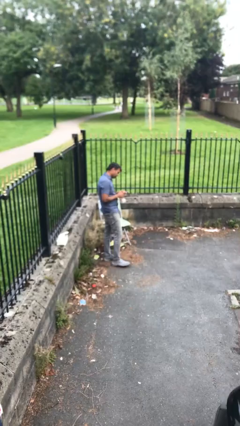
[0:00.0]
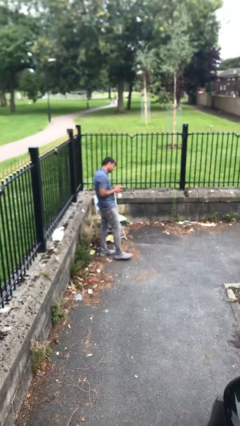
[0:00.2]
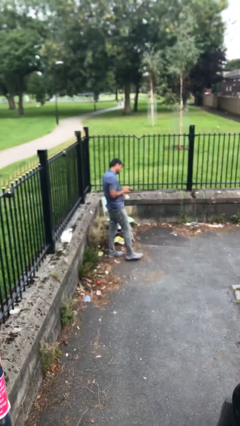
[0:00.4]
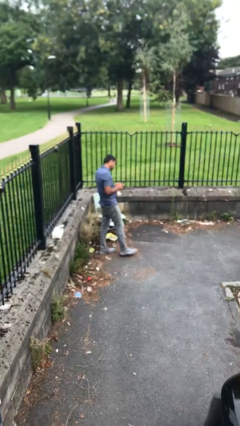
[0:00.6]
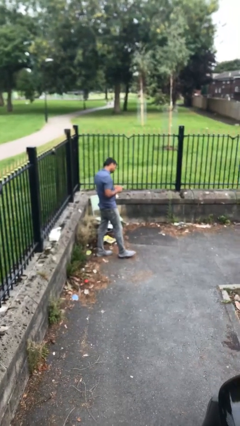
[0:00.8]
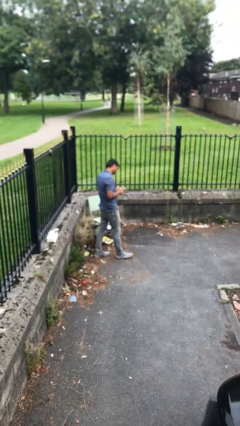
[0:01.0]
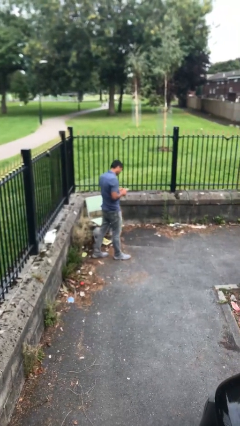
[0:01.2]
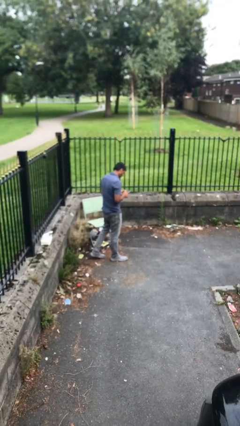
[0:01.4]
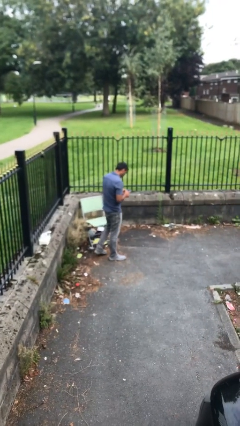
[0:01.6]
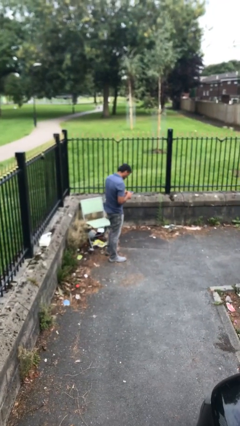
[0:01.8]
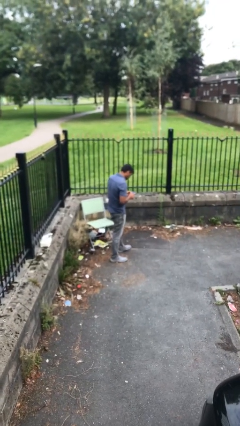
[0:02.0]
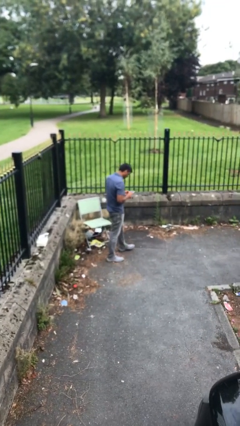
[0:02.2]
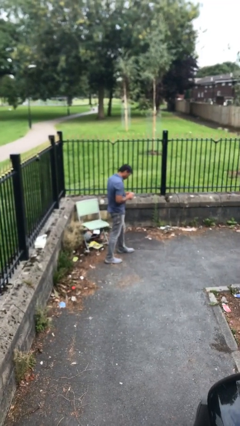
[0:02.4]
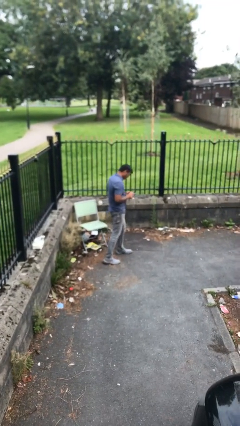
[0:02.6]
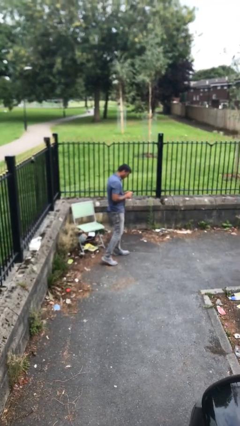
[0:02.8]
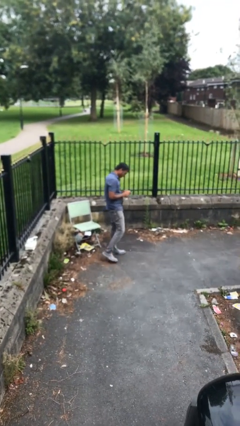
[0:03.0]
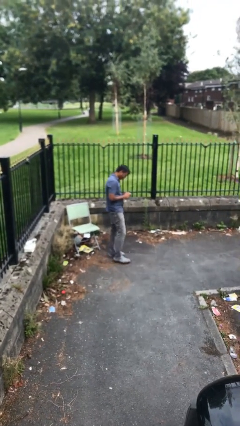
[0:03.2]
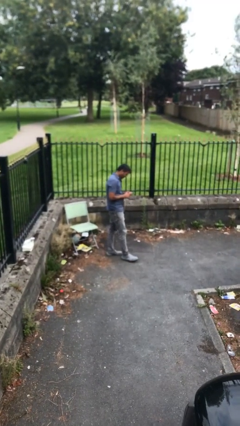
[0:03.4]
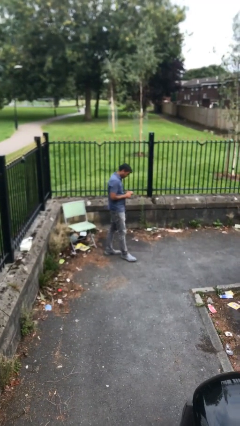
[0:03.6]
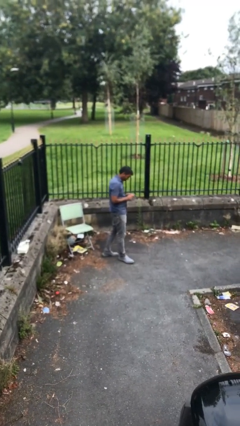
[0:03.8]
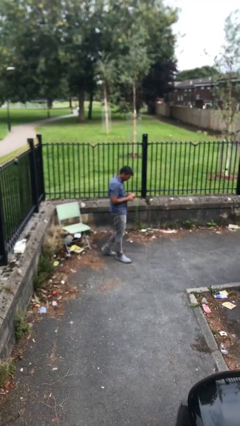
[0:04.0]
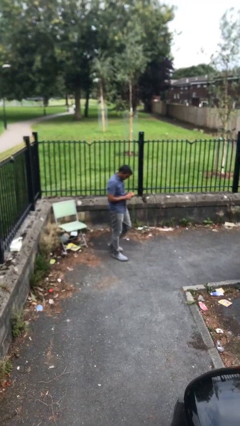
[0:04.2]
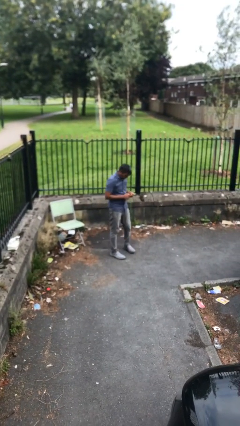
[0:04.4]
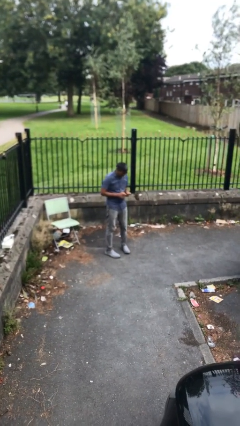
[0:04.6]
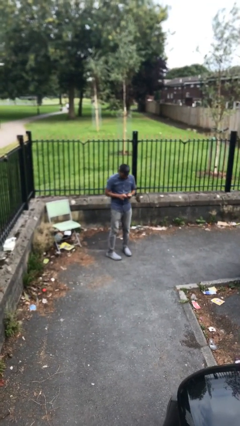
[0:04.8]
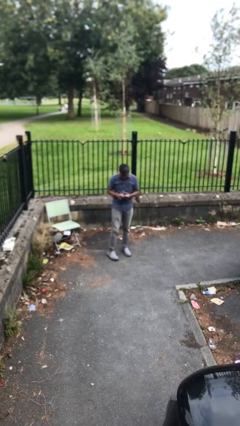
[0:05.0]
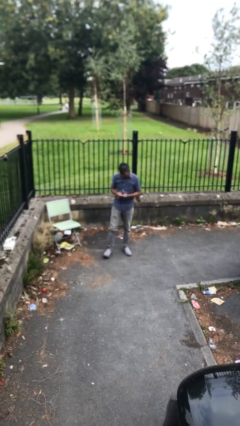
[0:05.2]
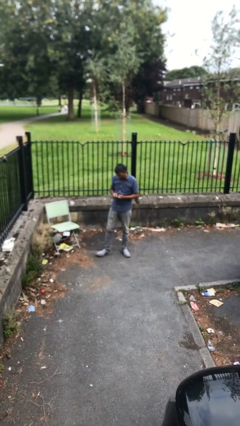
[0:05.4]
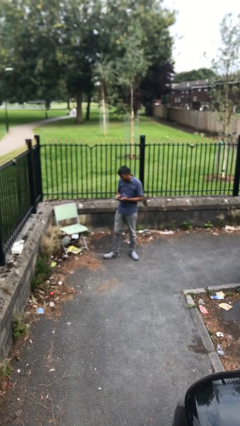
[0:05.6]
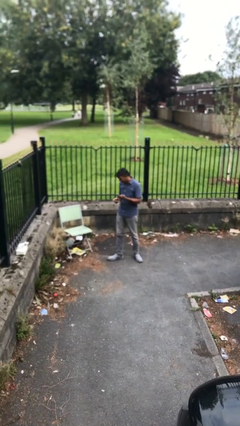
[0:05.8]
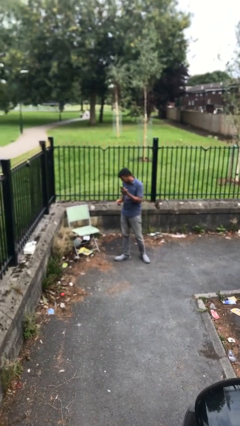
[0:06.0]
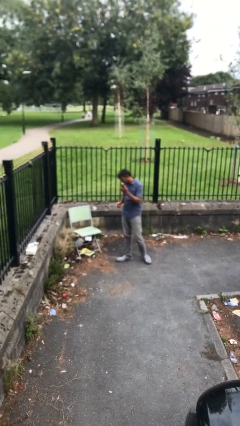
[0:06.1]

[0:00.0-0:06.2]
person texts on phone

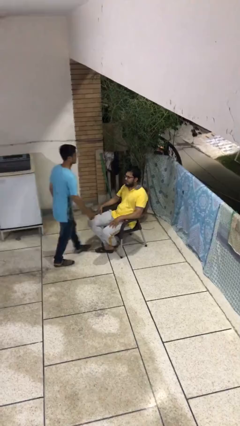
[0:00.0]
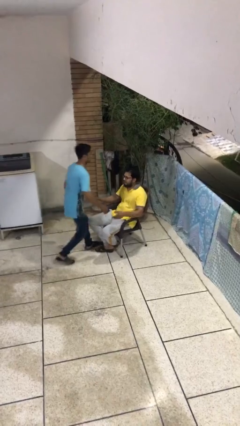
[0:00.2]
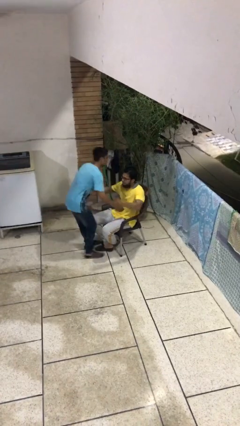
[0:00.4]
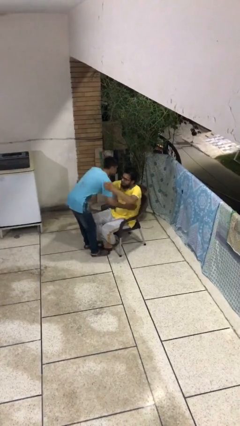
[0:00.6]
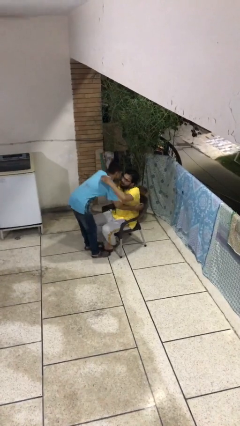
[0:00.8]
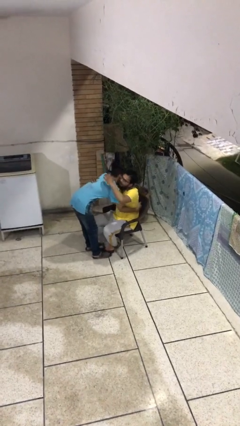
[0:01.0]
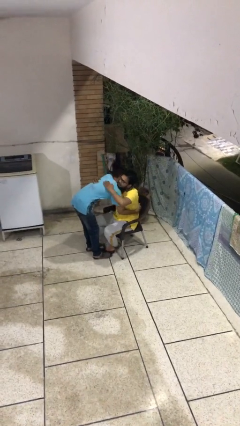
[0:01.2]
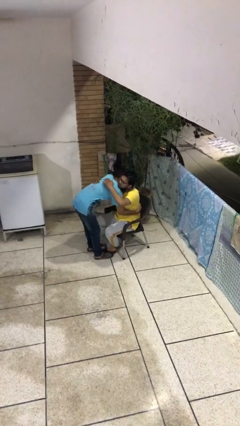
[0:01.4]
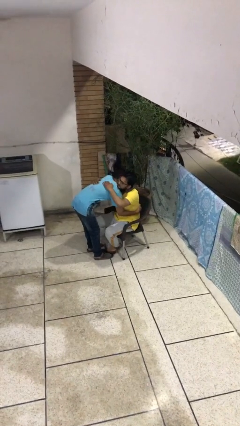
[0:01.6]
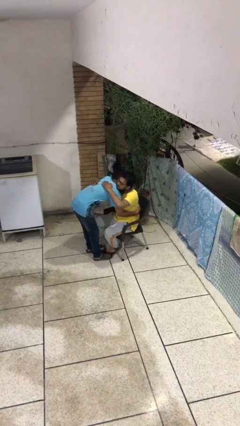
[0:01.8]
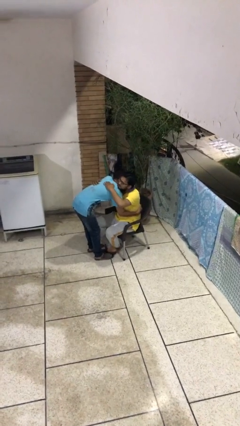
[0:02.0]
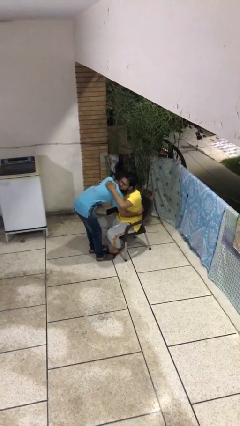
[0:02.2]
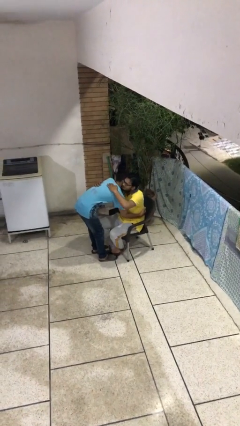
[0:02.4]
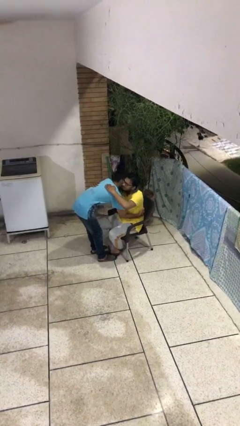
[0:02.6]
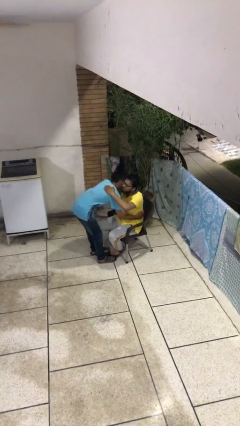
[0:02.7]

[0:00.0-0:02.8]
person embraces person

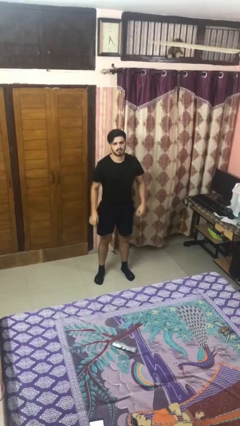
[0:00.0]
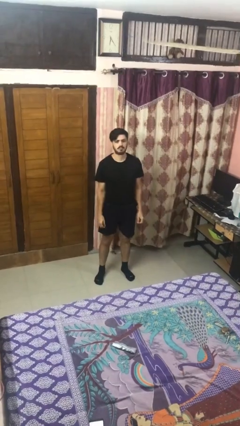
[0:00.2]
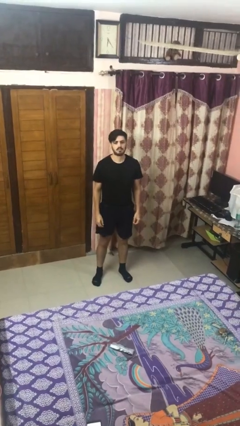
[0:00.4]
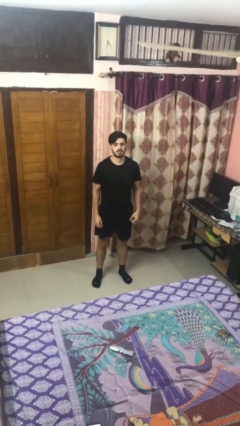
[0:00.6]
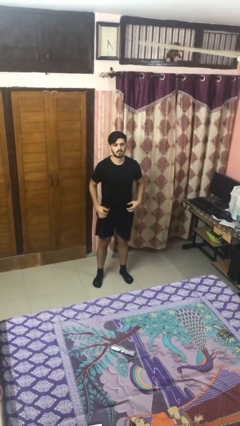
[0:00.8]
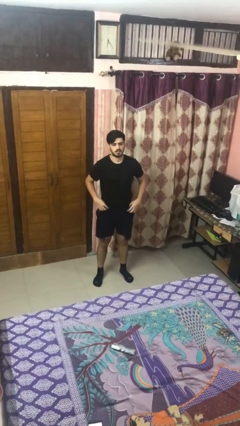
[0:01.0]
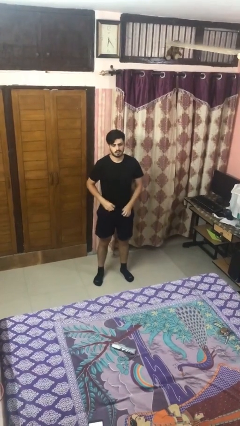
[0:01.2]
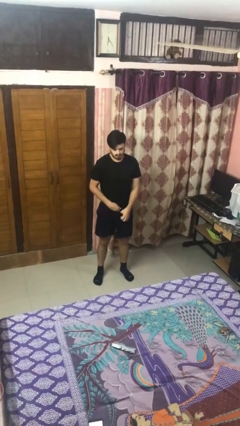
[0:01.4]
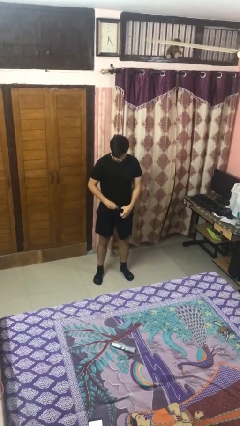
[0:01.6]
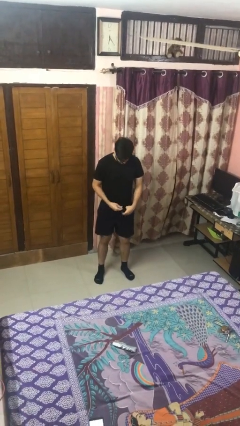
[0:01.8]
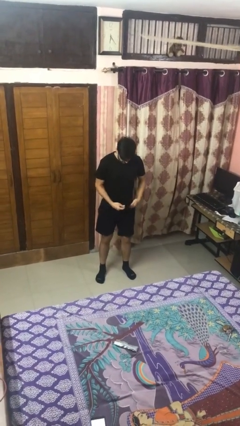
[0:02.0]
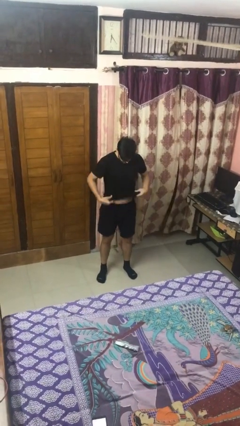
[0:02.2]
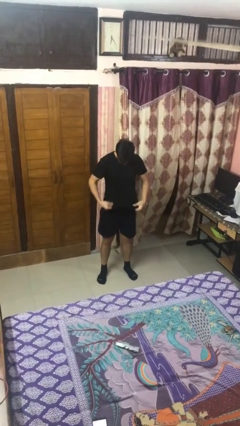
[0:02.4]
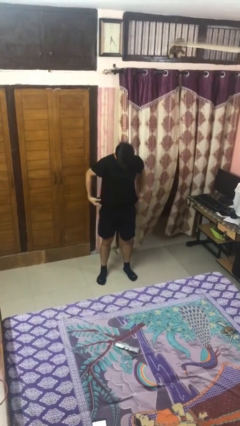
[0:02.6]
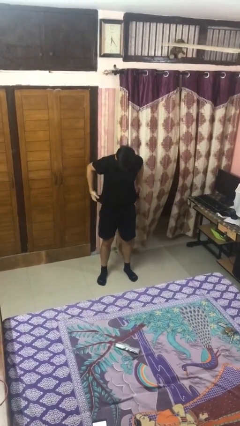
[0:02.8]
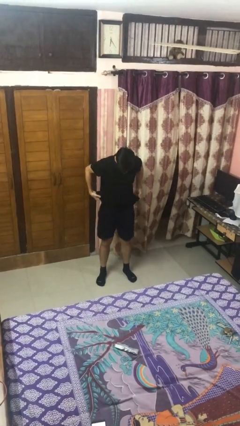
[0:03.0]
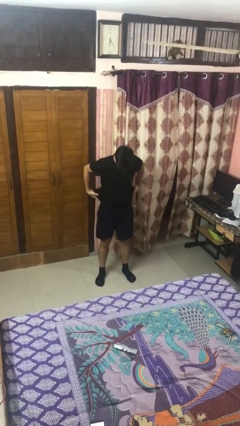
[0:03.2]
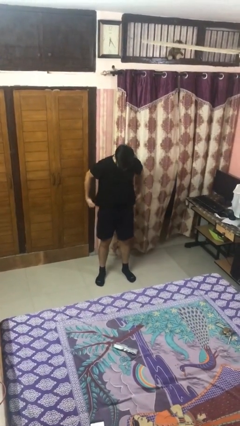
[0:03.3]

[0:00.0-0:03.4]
person untucks shirt

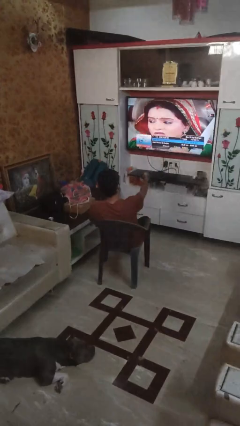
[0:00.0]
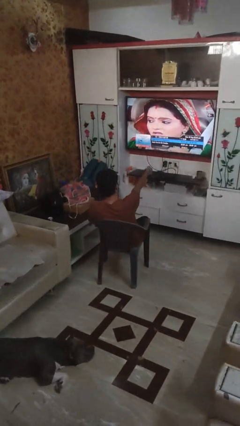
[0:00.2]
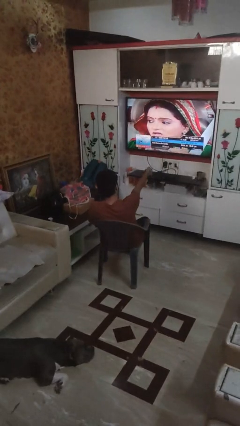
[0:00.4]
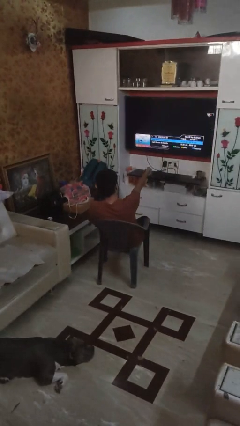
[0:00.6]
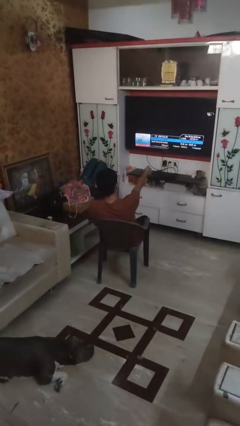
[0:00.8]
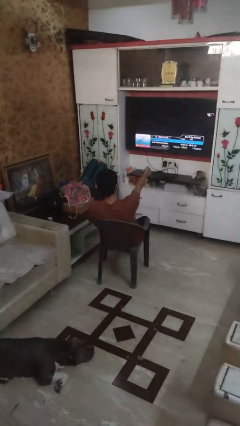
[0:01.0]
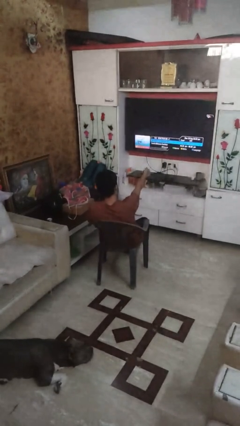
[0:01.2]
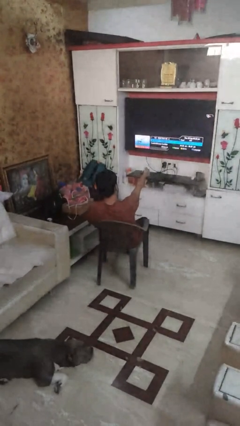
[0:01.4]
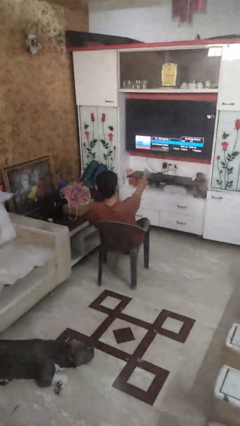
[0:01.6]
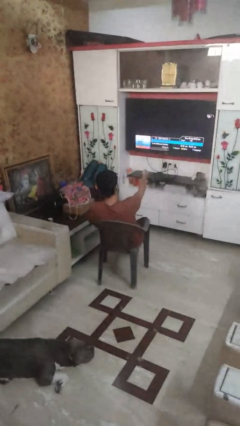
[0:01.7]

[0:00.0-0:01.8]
person uses television remote

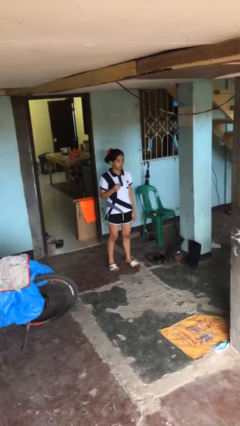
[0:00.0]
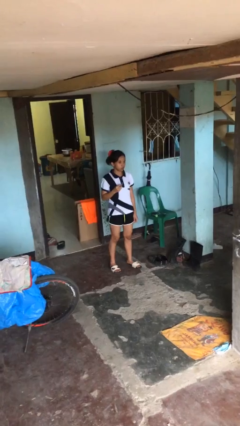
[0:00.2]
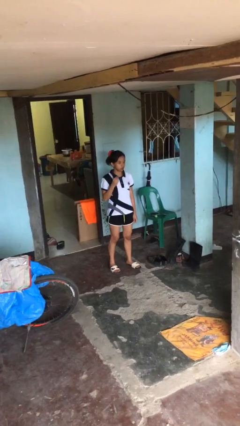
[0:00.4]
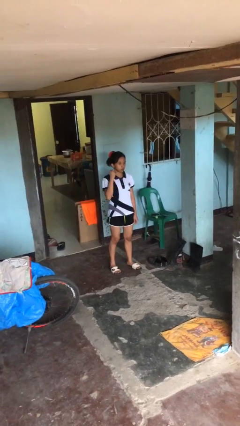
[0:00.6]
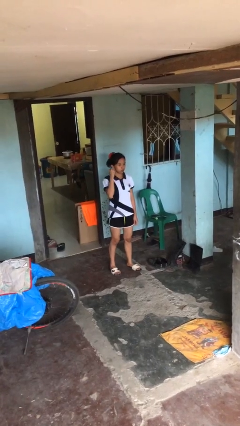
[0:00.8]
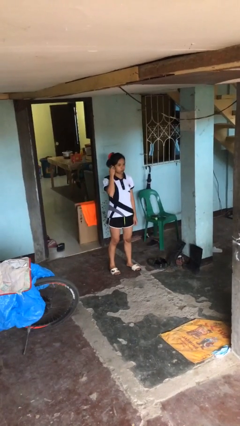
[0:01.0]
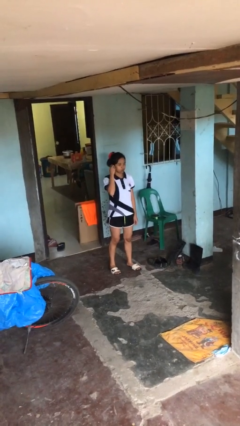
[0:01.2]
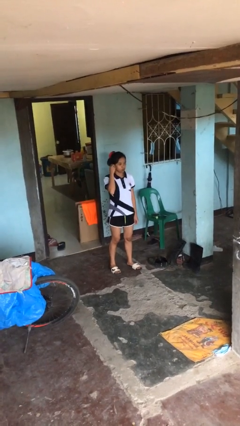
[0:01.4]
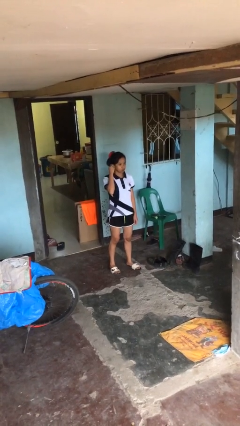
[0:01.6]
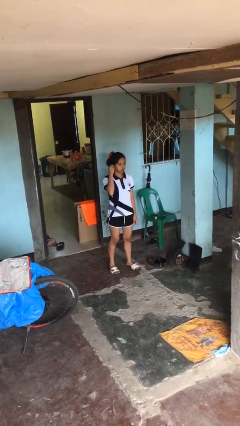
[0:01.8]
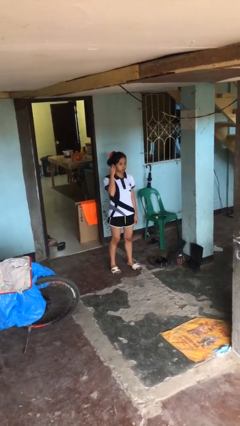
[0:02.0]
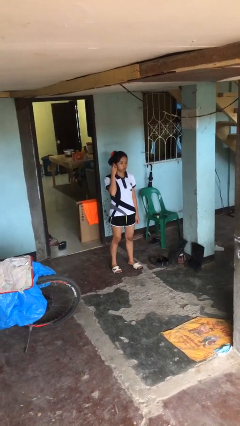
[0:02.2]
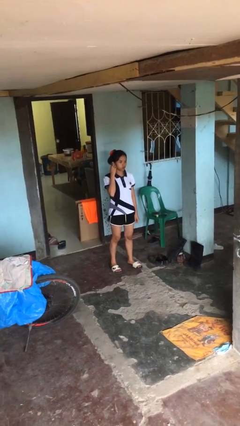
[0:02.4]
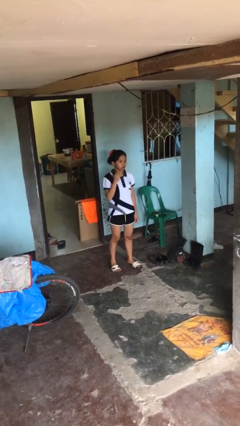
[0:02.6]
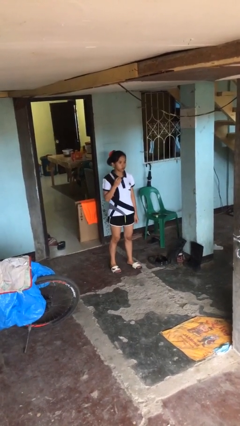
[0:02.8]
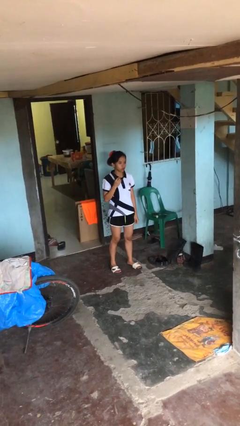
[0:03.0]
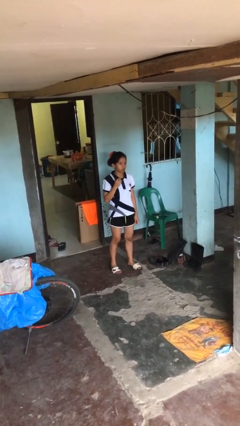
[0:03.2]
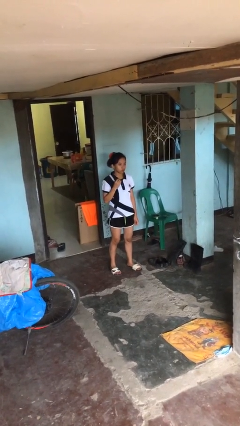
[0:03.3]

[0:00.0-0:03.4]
person puts on earrings
